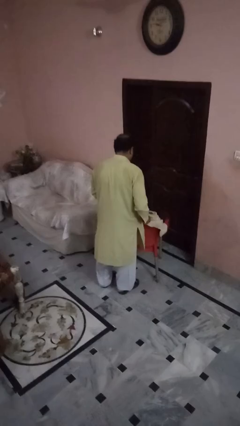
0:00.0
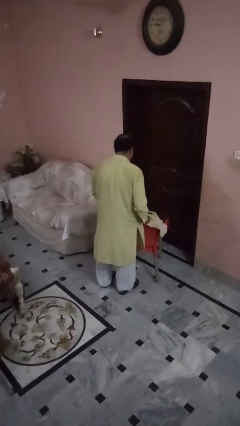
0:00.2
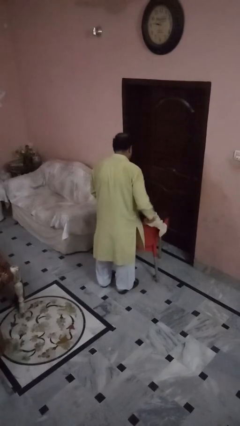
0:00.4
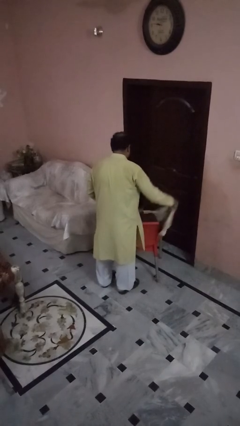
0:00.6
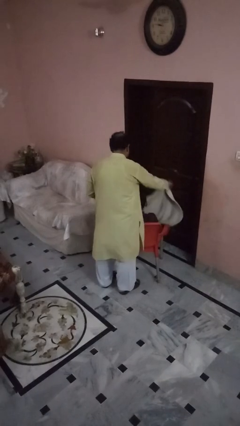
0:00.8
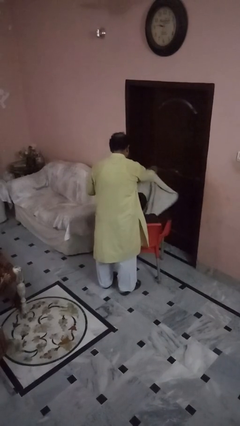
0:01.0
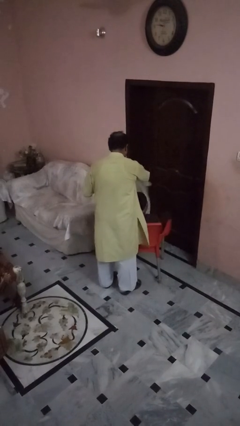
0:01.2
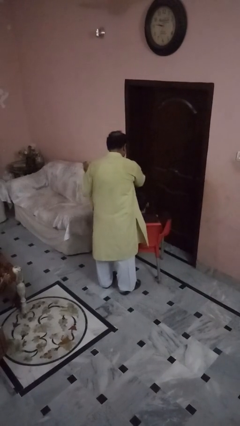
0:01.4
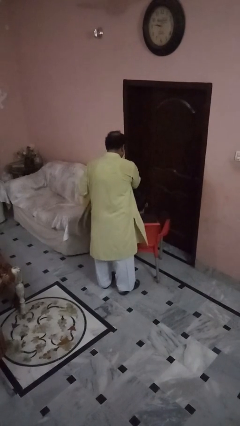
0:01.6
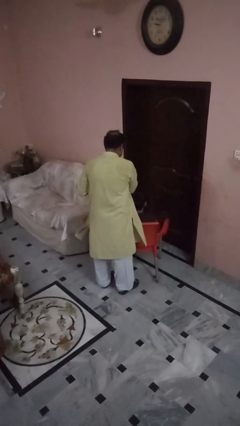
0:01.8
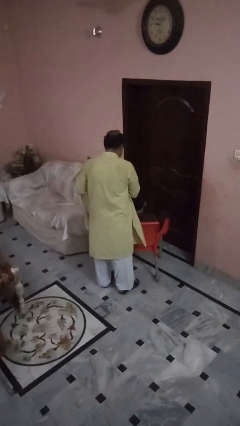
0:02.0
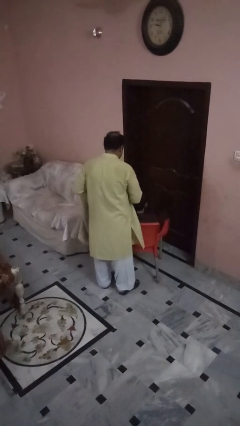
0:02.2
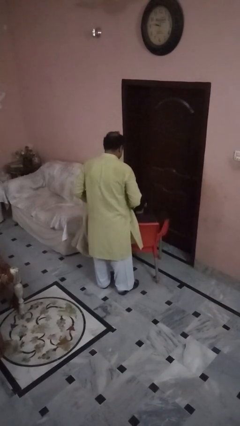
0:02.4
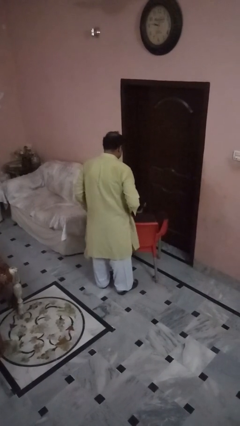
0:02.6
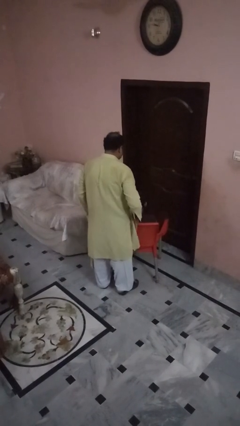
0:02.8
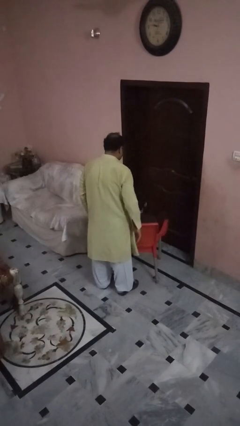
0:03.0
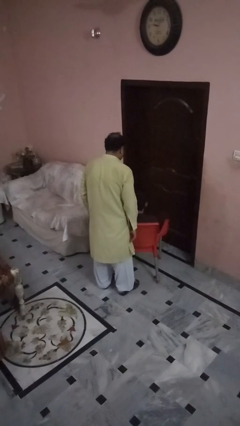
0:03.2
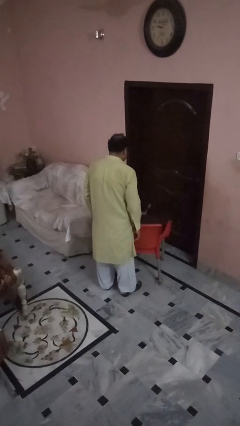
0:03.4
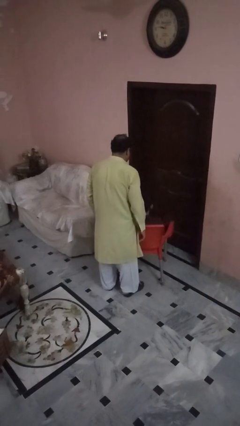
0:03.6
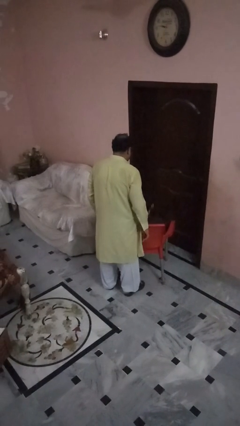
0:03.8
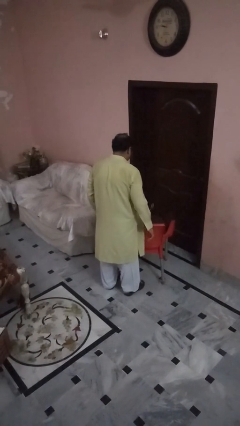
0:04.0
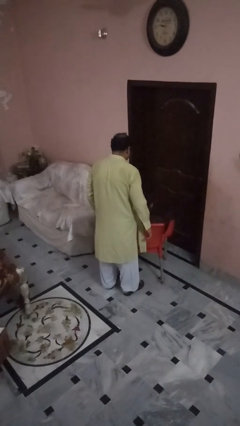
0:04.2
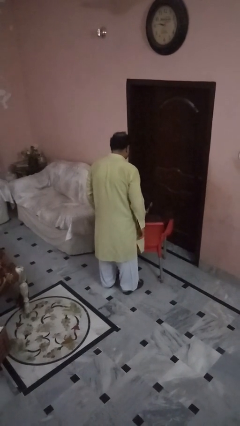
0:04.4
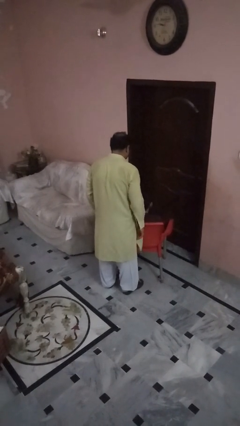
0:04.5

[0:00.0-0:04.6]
person uncovers friend with blanket

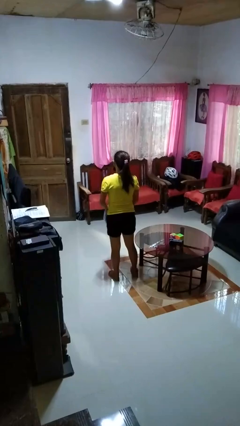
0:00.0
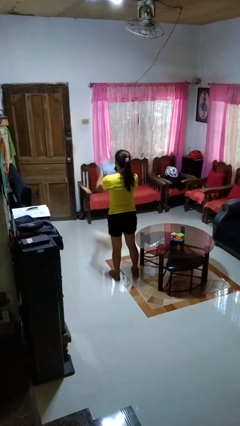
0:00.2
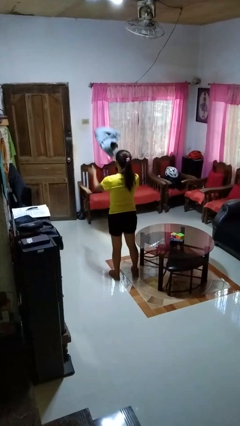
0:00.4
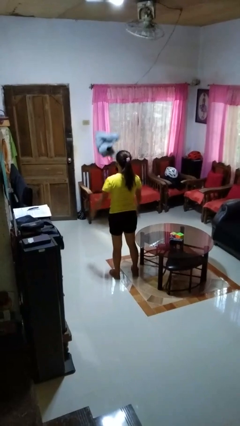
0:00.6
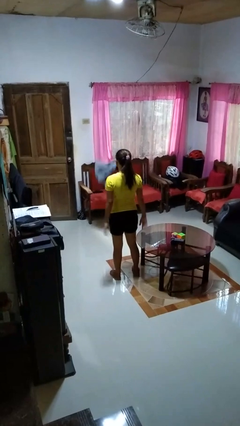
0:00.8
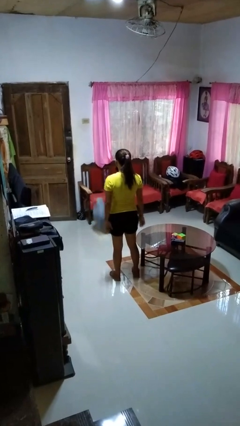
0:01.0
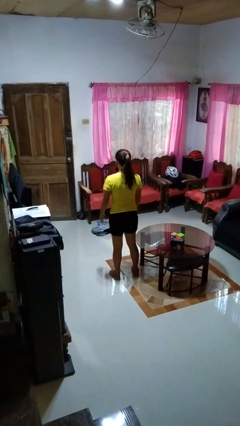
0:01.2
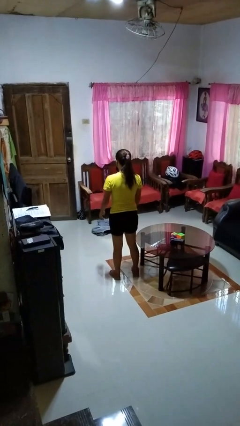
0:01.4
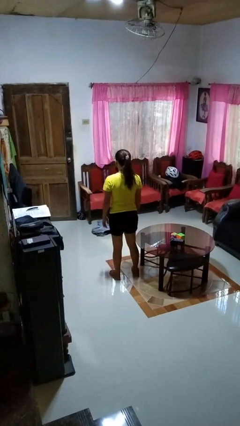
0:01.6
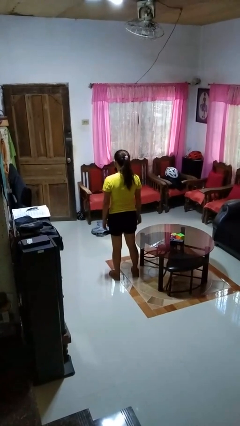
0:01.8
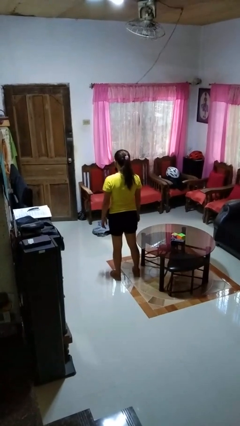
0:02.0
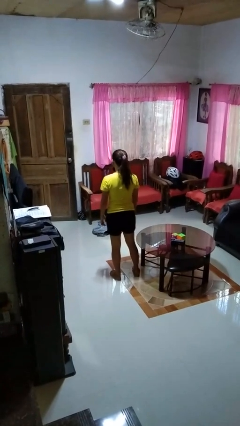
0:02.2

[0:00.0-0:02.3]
person throws object into air

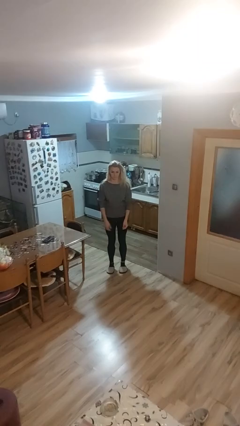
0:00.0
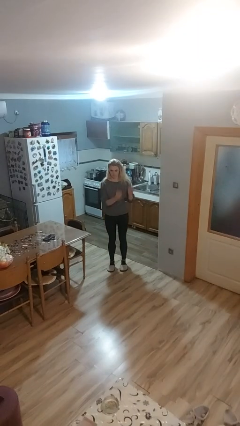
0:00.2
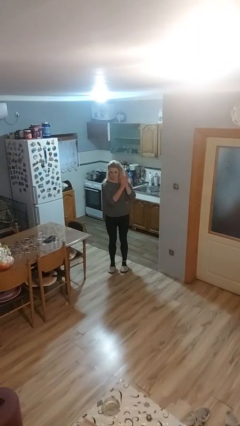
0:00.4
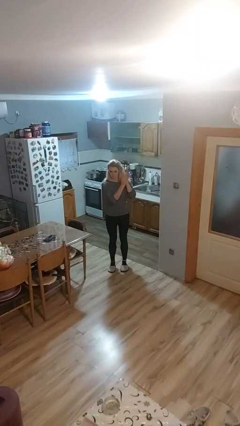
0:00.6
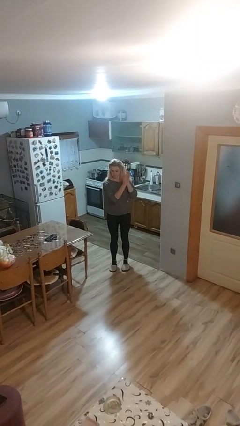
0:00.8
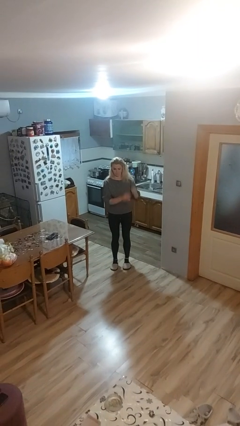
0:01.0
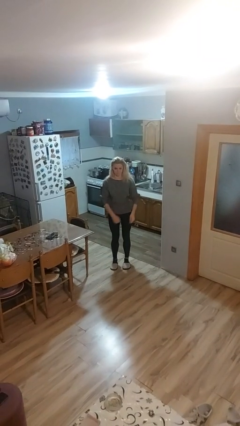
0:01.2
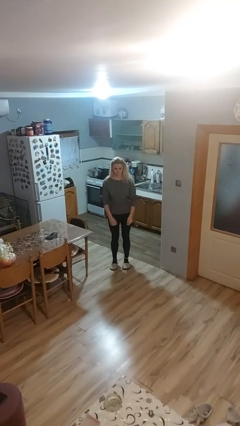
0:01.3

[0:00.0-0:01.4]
person claps hands

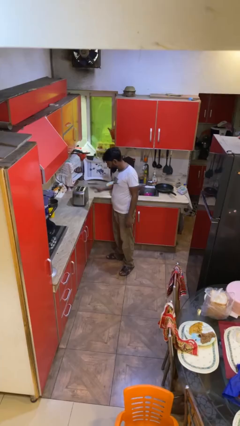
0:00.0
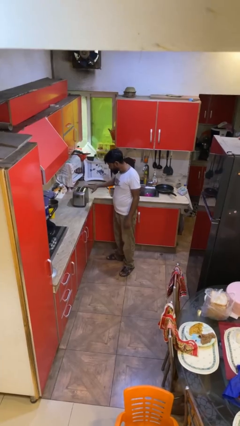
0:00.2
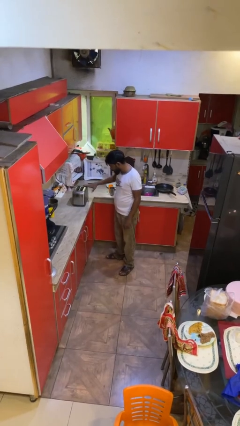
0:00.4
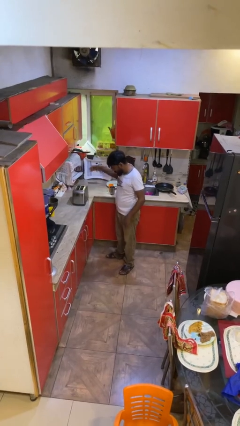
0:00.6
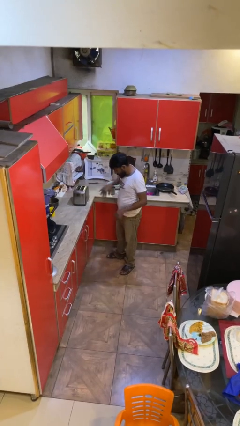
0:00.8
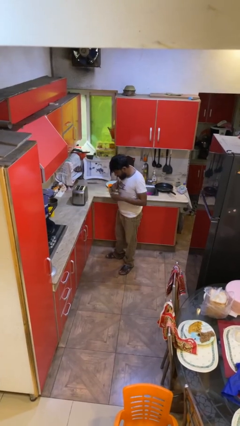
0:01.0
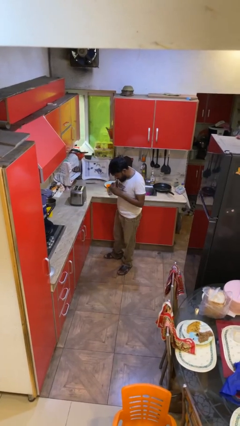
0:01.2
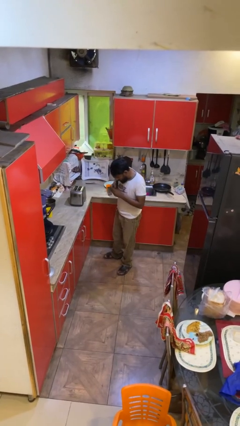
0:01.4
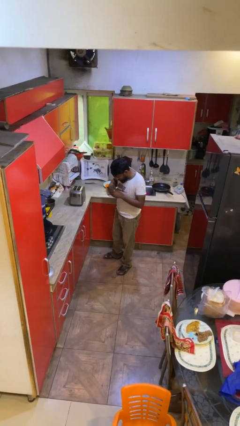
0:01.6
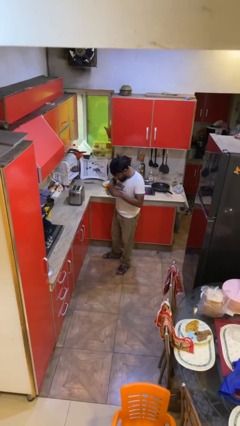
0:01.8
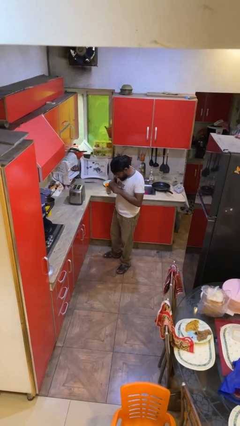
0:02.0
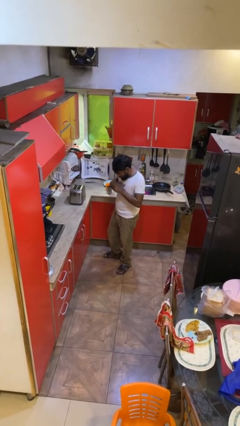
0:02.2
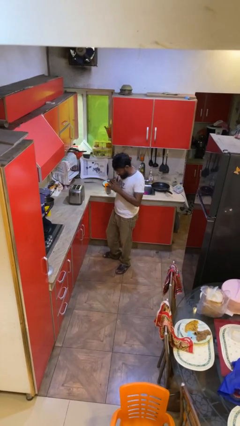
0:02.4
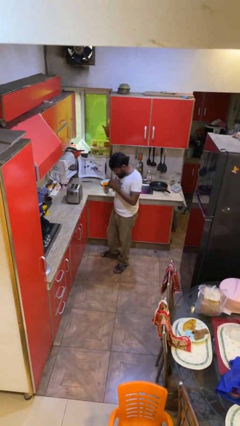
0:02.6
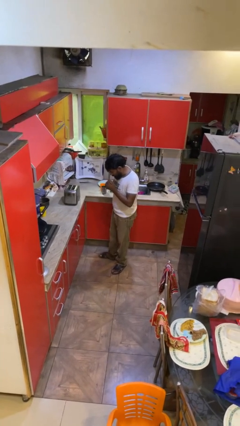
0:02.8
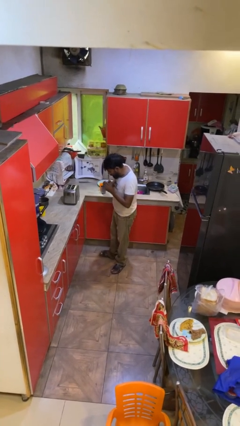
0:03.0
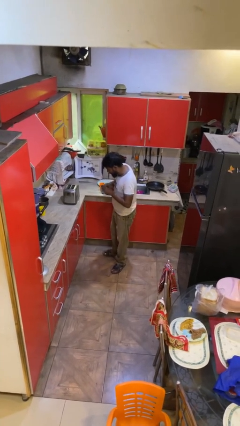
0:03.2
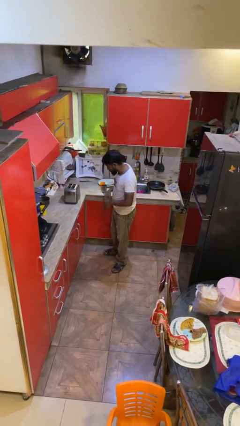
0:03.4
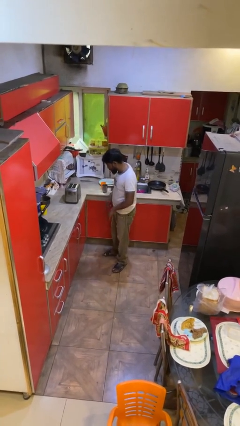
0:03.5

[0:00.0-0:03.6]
person burns hand

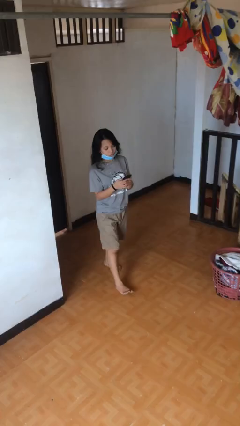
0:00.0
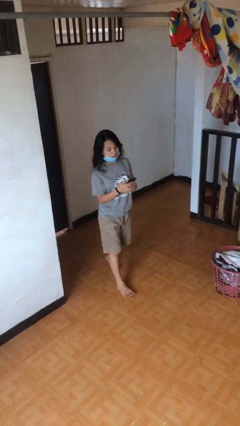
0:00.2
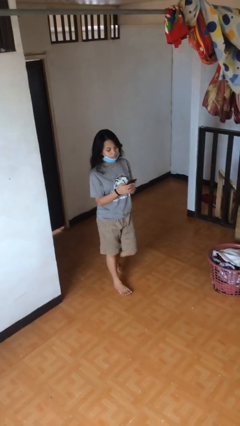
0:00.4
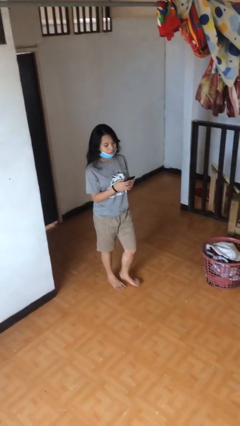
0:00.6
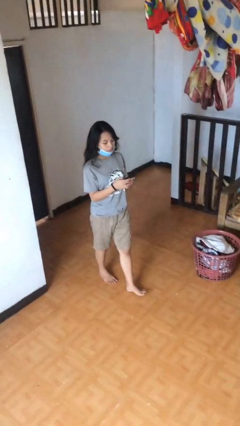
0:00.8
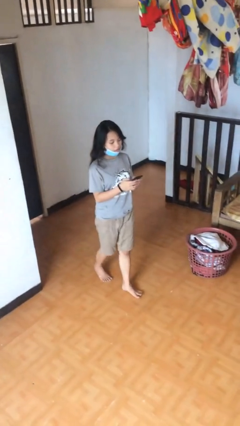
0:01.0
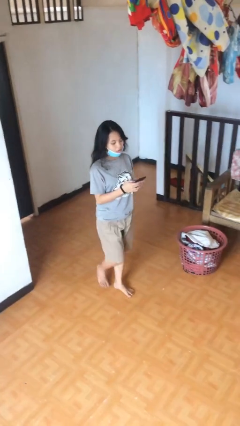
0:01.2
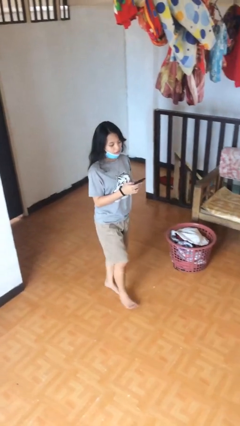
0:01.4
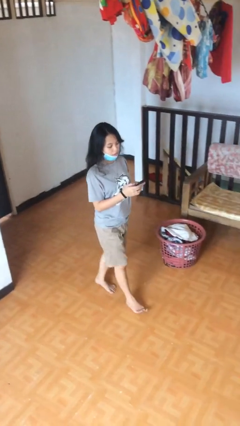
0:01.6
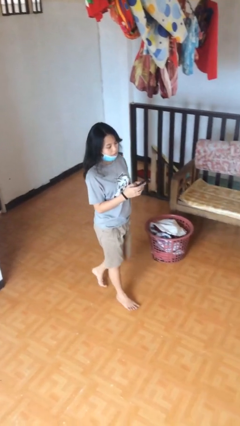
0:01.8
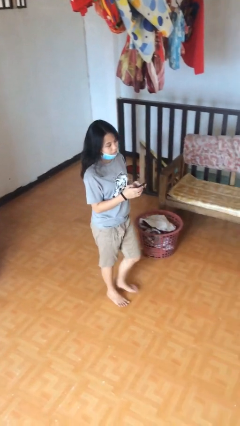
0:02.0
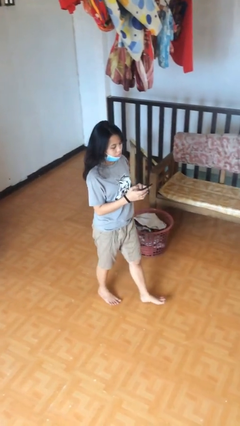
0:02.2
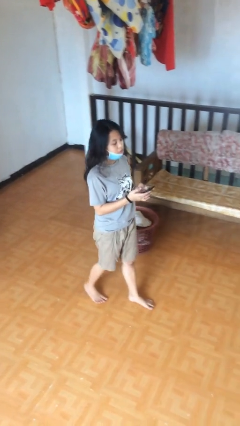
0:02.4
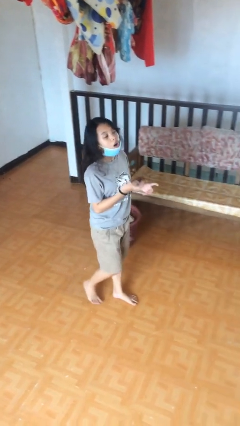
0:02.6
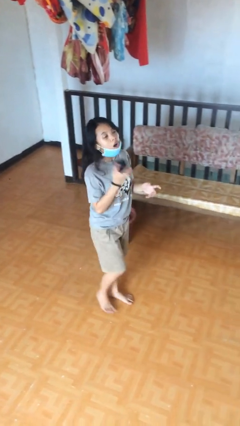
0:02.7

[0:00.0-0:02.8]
person texts on phone

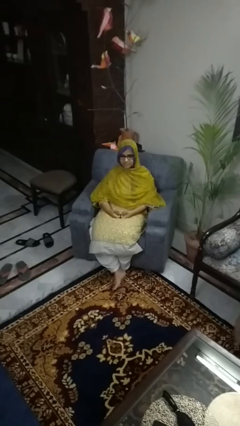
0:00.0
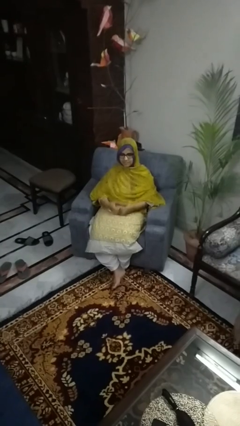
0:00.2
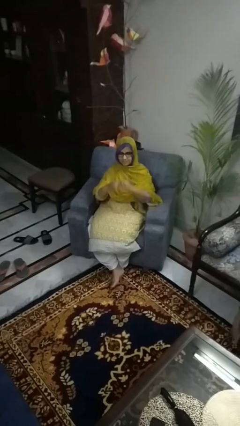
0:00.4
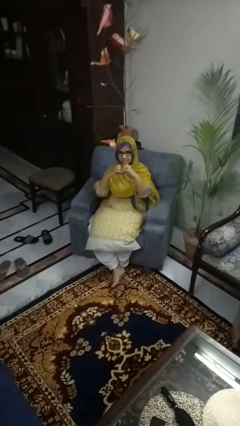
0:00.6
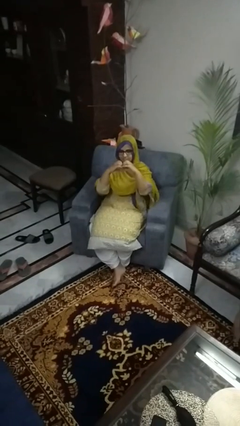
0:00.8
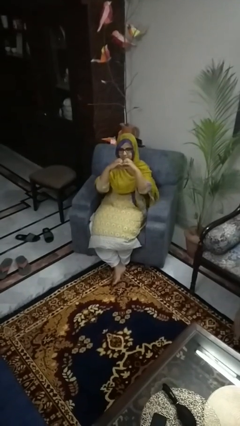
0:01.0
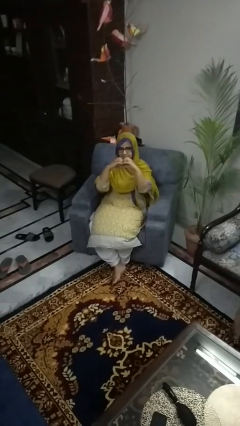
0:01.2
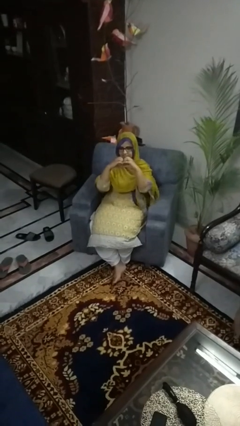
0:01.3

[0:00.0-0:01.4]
person gestures heart

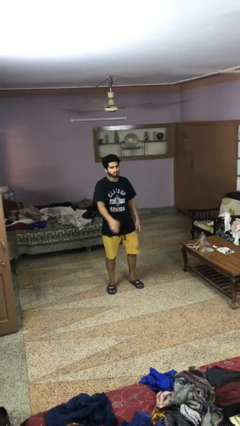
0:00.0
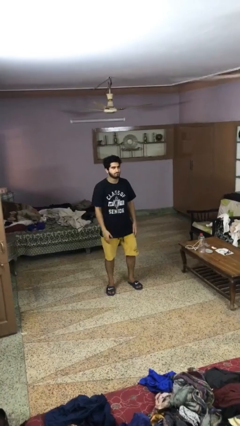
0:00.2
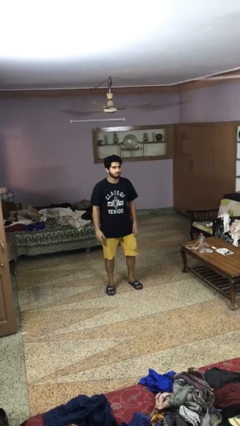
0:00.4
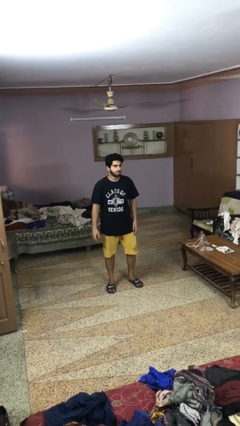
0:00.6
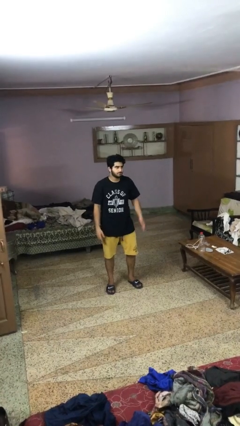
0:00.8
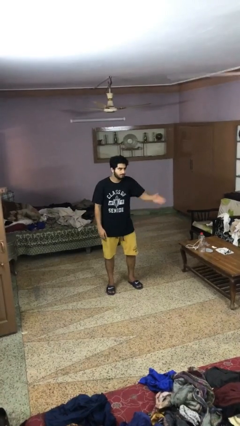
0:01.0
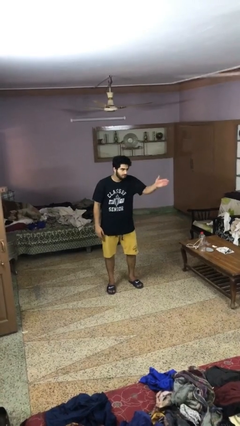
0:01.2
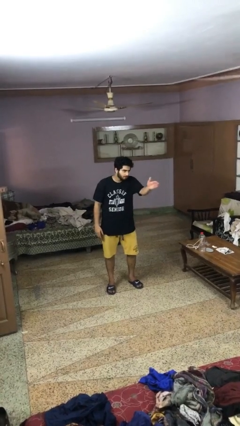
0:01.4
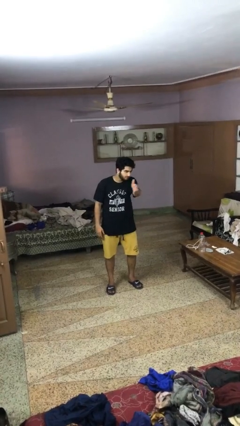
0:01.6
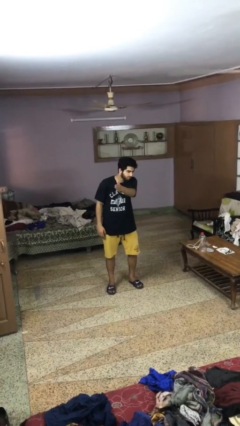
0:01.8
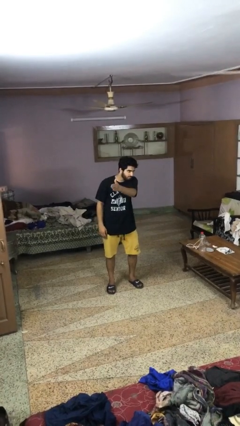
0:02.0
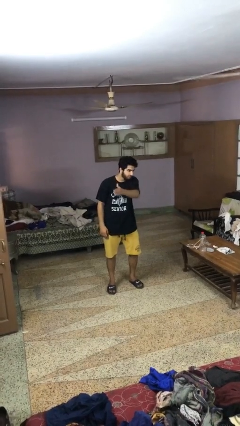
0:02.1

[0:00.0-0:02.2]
person gestures swipe right
